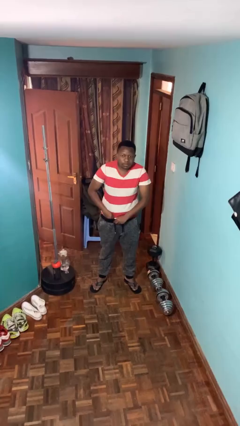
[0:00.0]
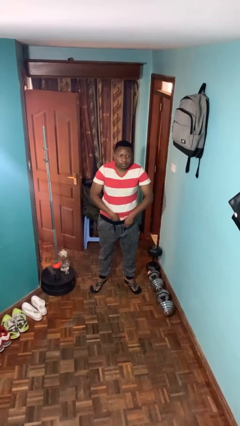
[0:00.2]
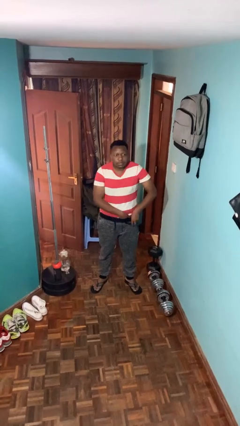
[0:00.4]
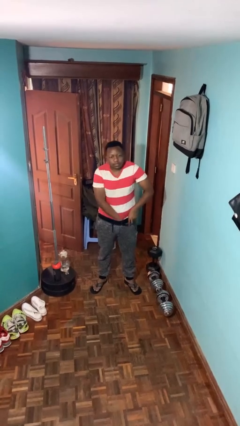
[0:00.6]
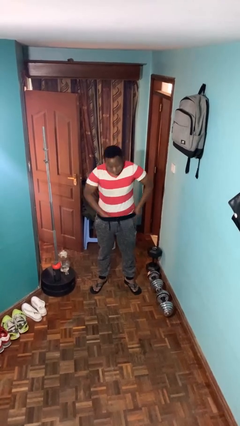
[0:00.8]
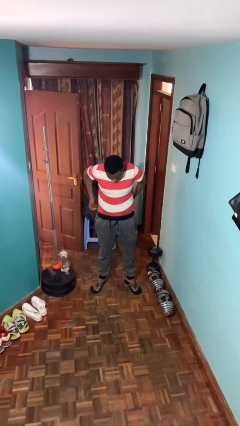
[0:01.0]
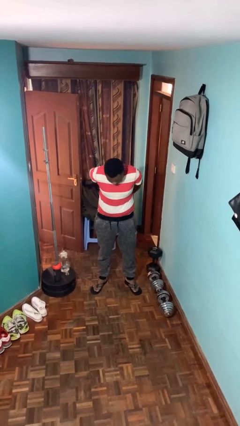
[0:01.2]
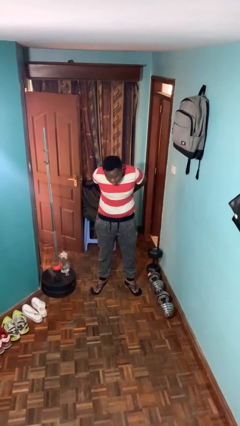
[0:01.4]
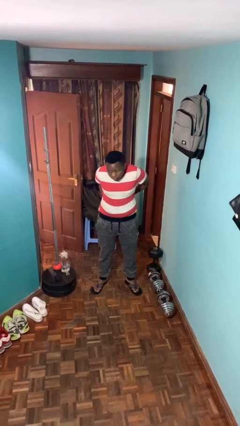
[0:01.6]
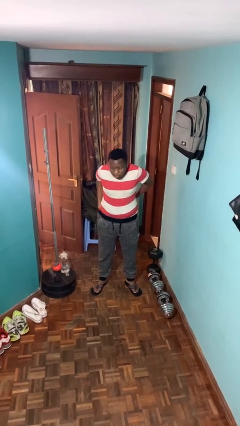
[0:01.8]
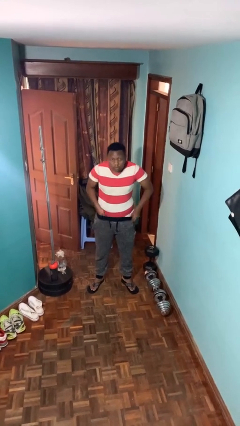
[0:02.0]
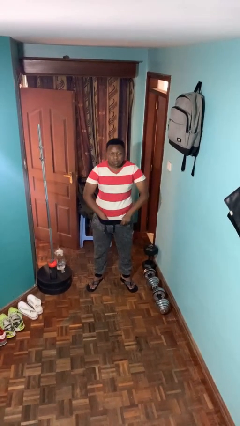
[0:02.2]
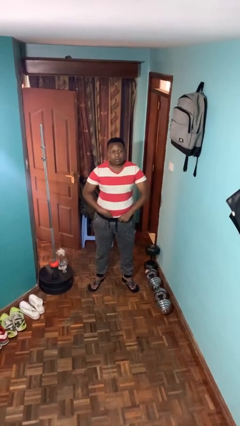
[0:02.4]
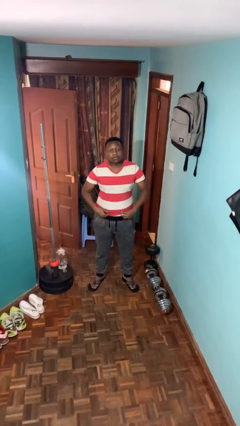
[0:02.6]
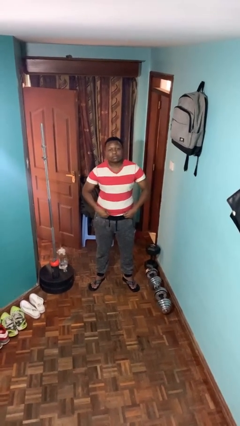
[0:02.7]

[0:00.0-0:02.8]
person tucks in shirt

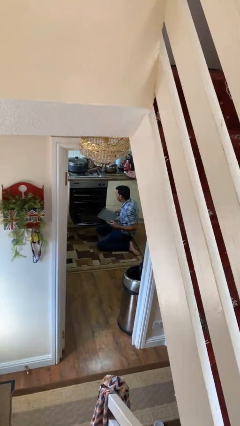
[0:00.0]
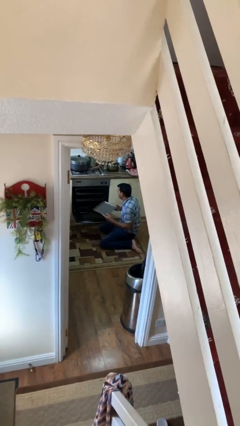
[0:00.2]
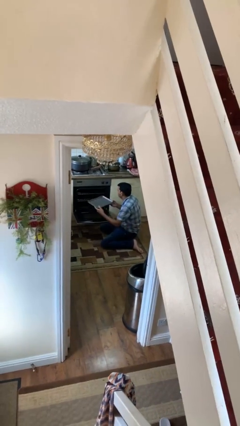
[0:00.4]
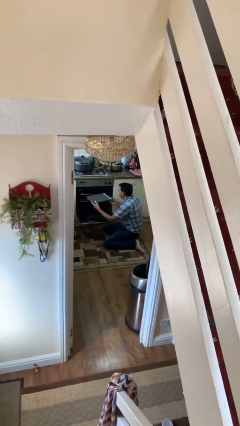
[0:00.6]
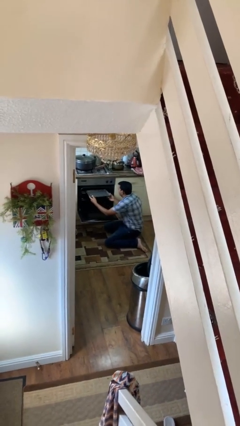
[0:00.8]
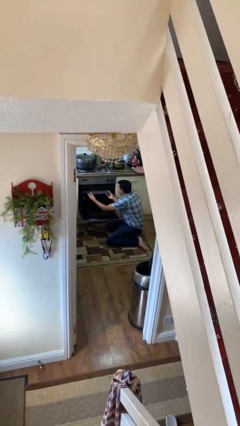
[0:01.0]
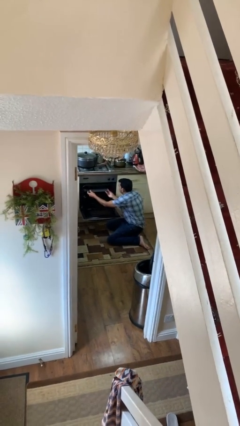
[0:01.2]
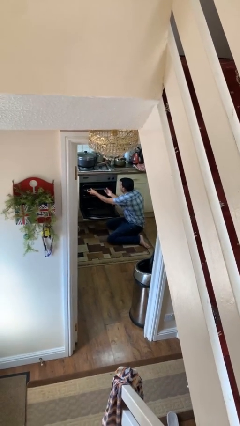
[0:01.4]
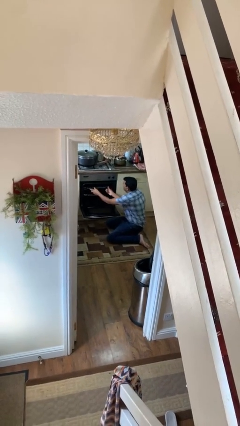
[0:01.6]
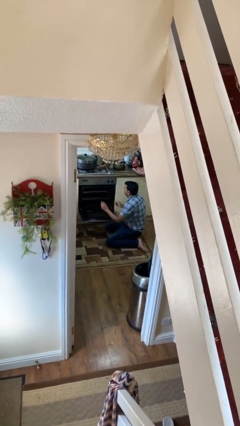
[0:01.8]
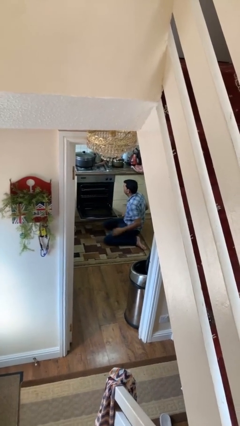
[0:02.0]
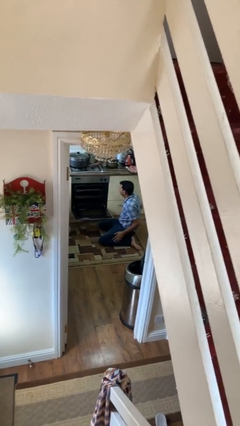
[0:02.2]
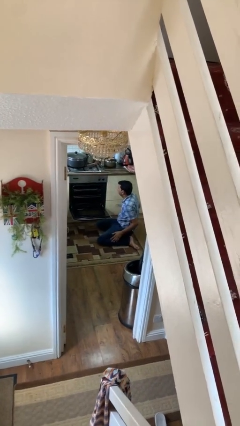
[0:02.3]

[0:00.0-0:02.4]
person puts object into oven

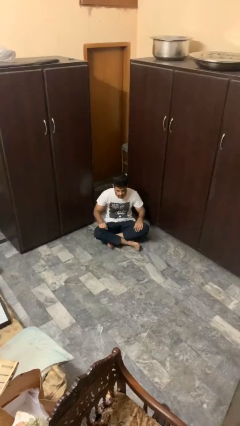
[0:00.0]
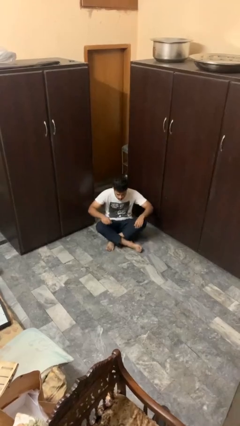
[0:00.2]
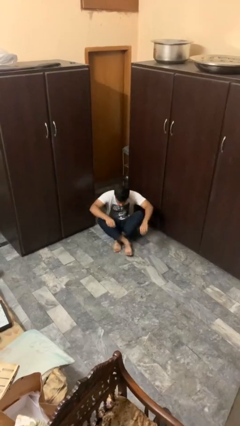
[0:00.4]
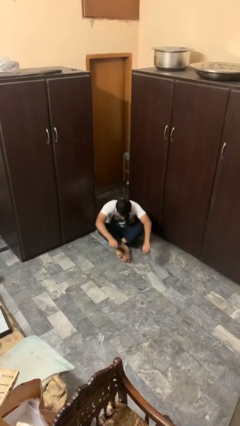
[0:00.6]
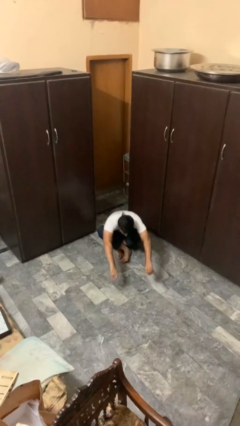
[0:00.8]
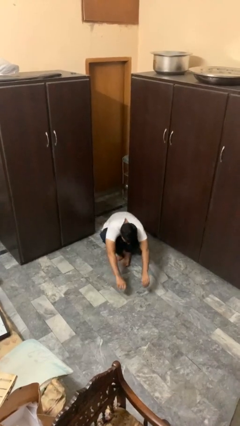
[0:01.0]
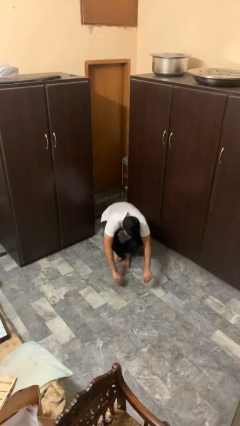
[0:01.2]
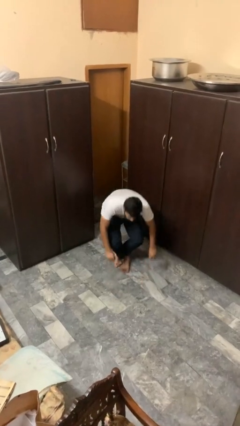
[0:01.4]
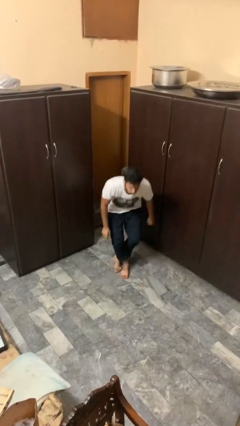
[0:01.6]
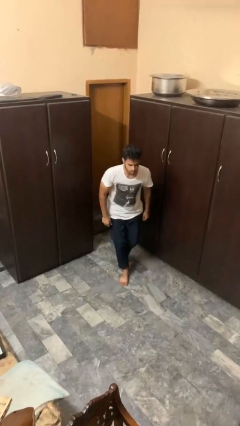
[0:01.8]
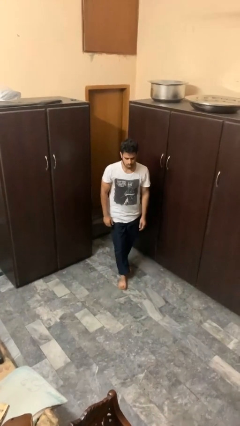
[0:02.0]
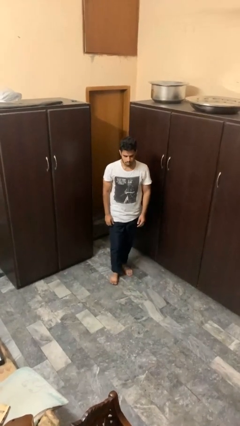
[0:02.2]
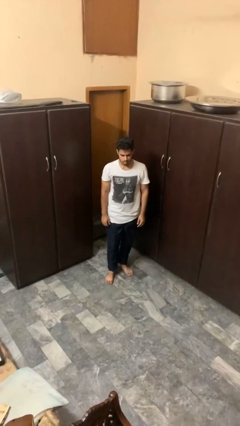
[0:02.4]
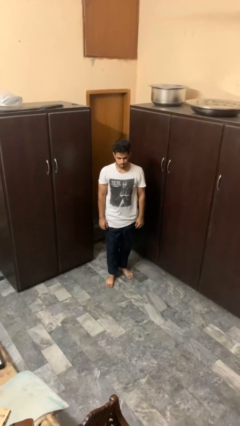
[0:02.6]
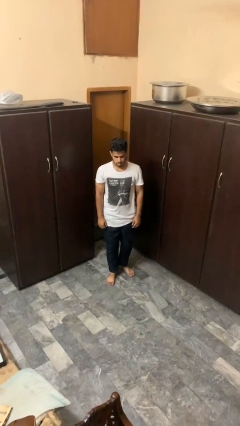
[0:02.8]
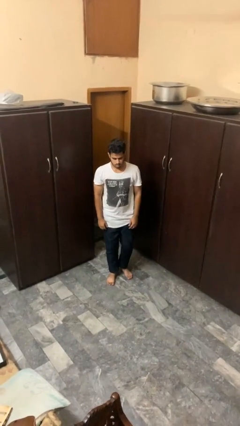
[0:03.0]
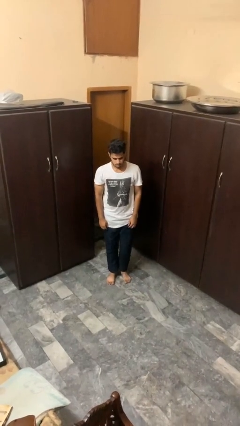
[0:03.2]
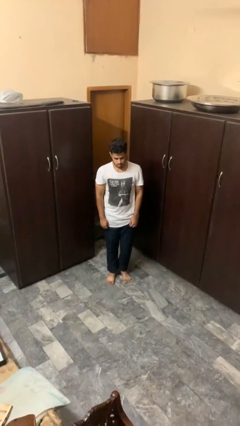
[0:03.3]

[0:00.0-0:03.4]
person stands up from floor

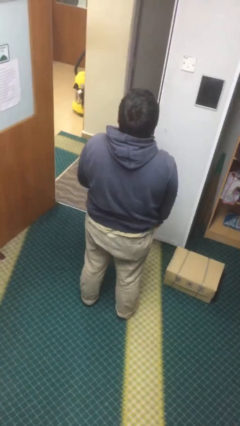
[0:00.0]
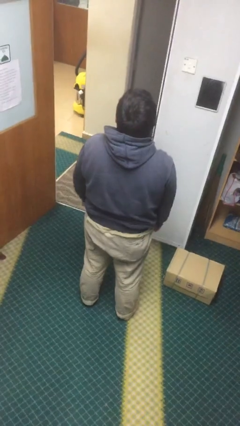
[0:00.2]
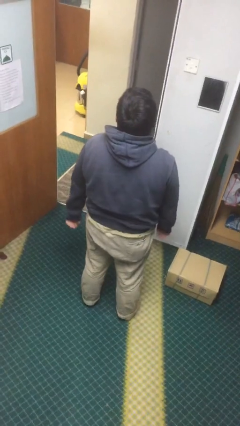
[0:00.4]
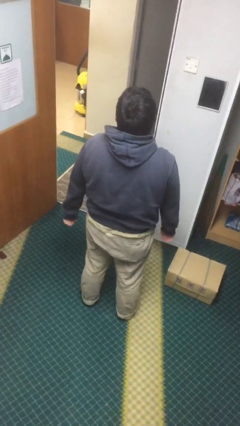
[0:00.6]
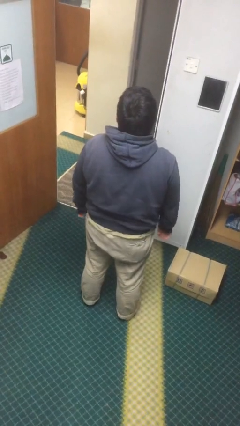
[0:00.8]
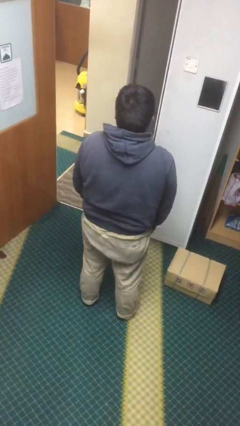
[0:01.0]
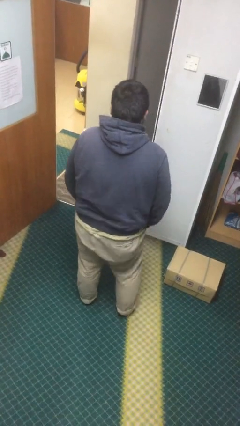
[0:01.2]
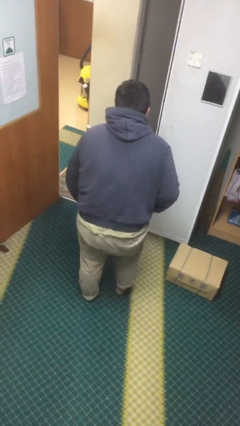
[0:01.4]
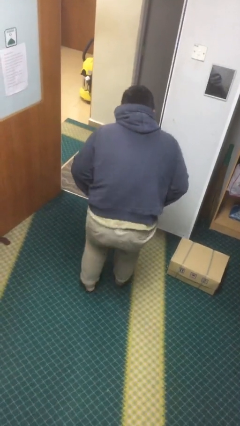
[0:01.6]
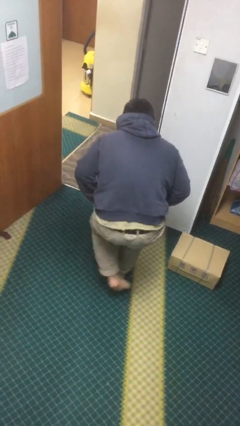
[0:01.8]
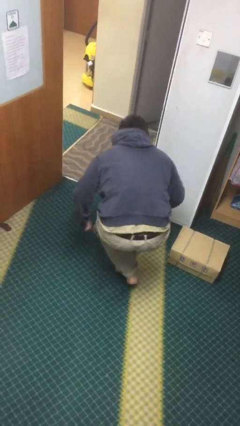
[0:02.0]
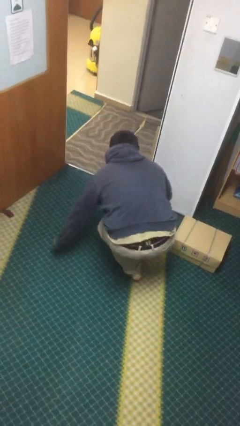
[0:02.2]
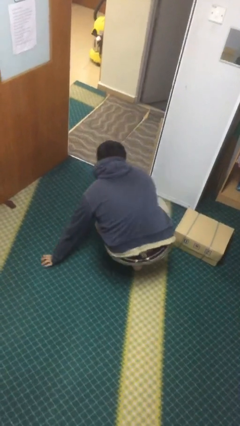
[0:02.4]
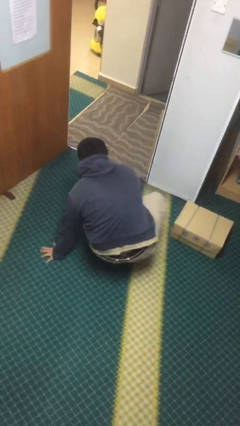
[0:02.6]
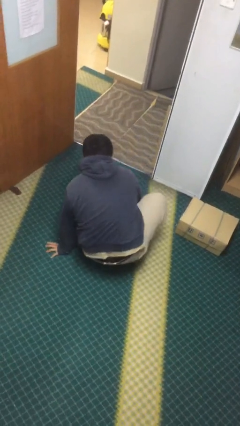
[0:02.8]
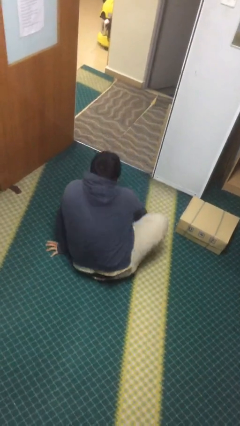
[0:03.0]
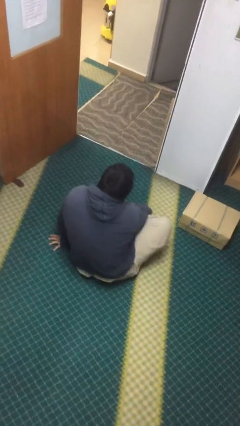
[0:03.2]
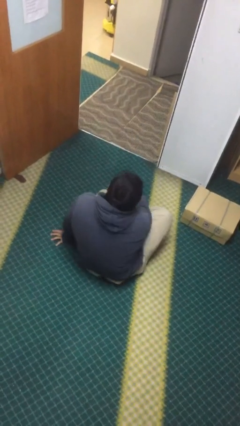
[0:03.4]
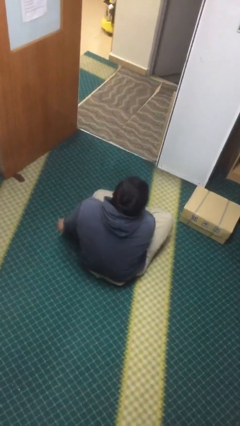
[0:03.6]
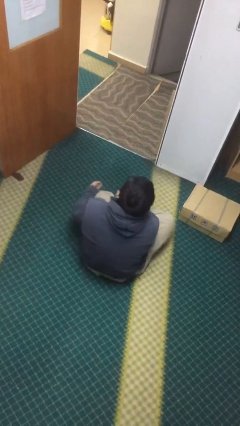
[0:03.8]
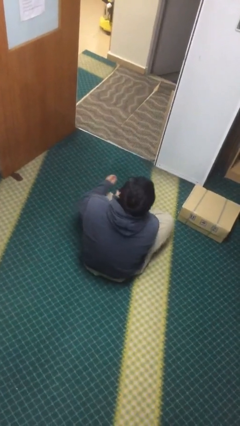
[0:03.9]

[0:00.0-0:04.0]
person sits crisscross

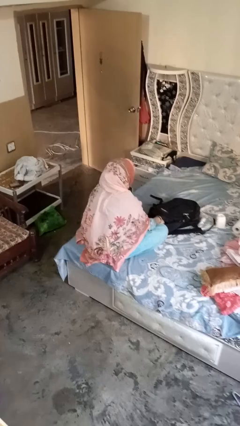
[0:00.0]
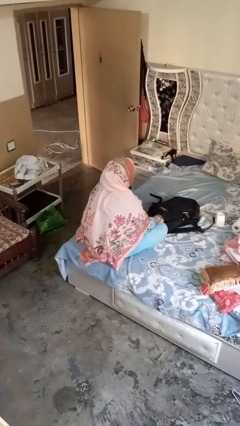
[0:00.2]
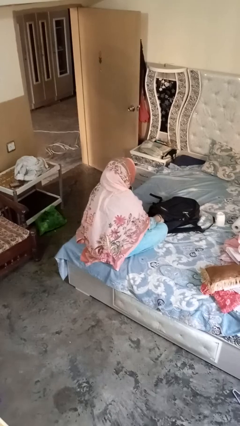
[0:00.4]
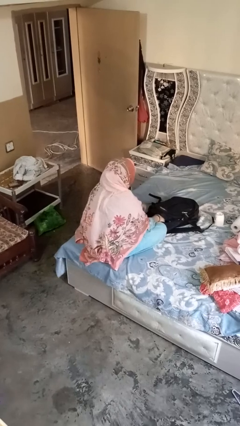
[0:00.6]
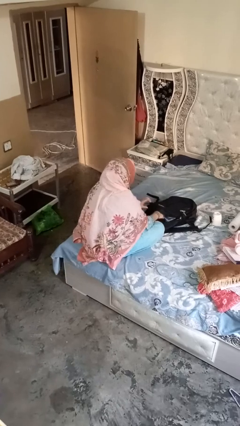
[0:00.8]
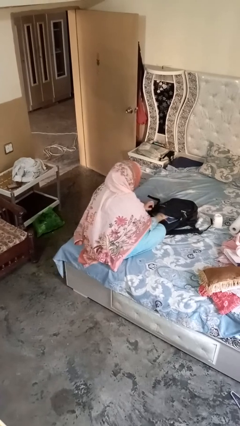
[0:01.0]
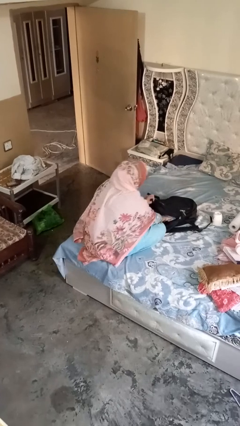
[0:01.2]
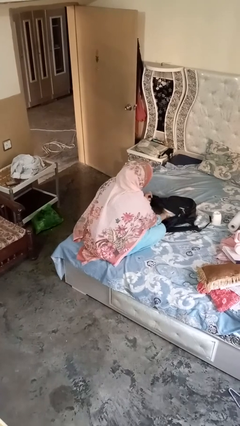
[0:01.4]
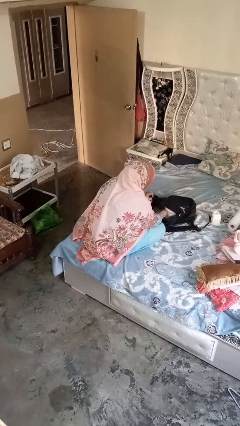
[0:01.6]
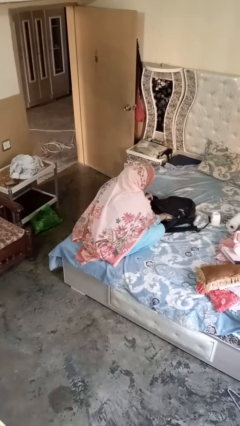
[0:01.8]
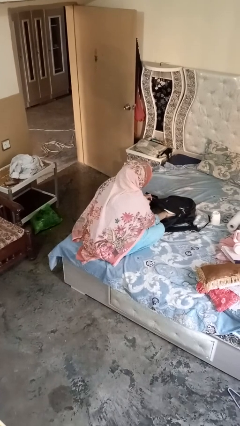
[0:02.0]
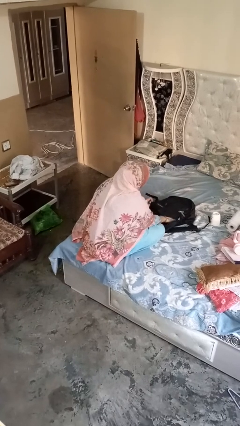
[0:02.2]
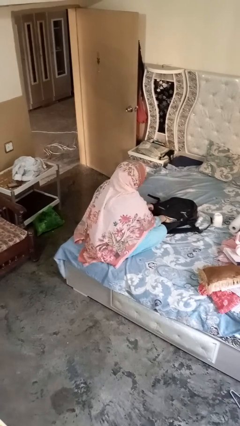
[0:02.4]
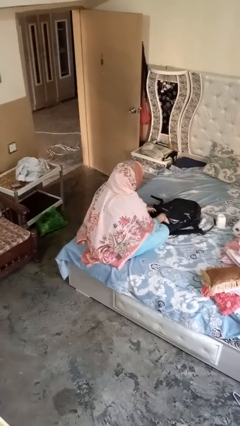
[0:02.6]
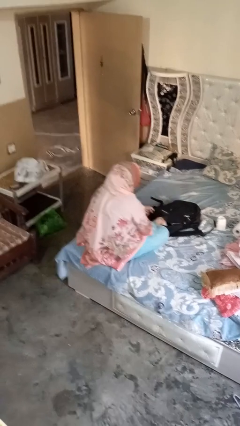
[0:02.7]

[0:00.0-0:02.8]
person searches in bag

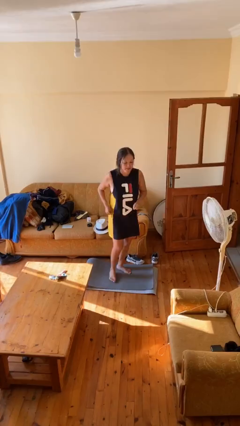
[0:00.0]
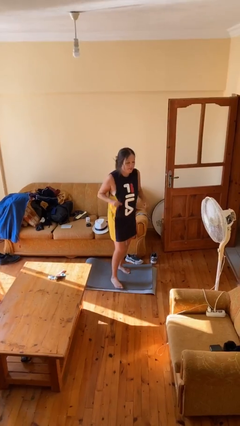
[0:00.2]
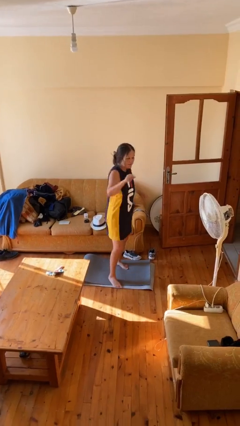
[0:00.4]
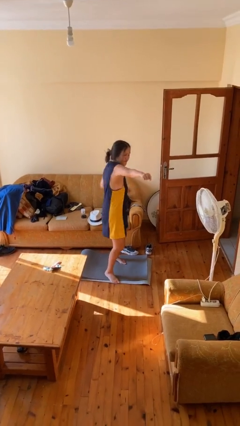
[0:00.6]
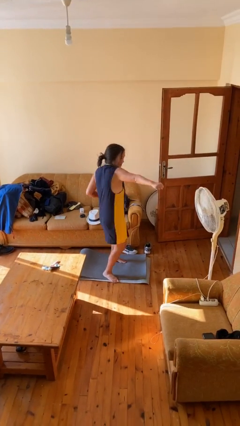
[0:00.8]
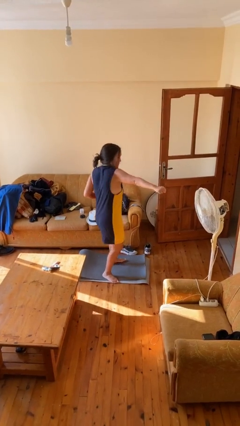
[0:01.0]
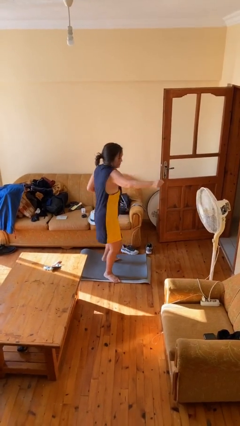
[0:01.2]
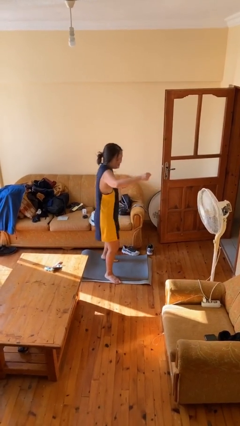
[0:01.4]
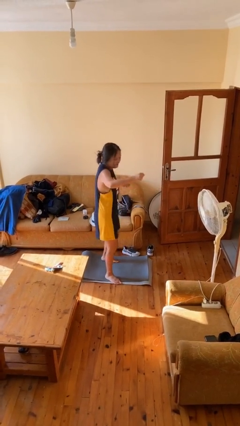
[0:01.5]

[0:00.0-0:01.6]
person punches

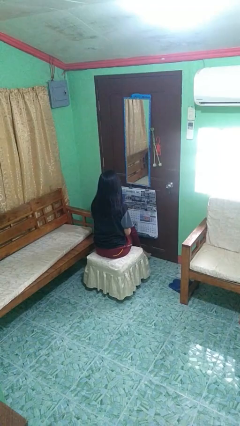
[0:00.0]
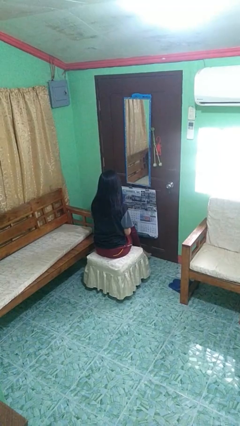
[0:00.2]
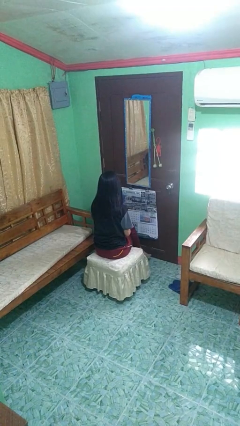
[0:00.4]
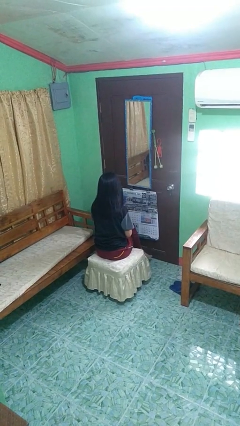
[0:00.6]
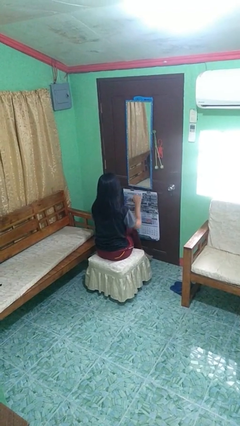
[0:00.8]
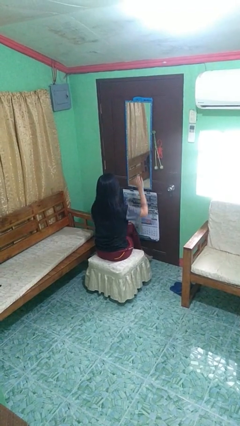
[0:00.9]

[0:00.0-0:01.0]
person gestures raise hand
